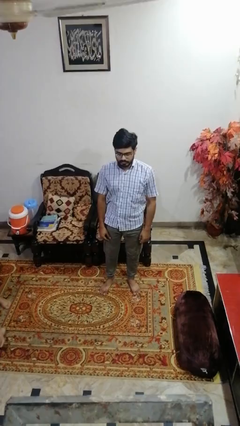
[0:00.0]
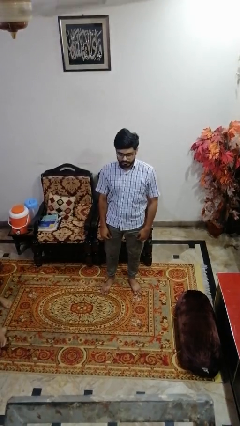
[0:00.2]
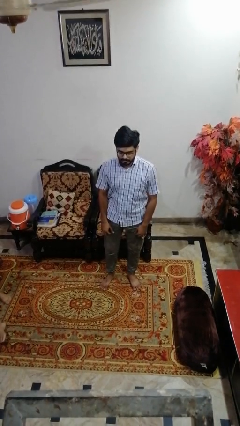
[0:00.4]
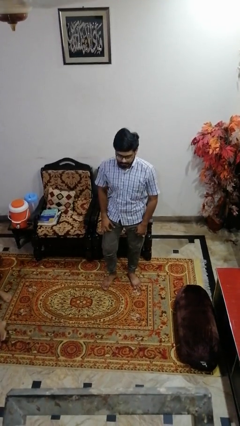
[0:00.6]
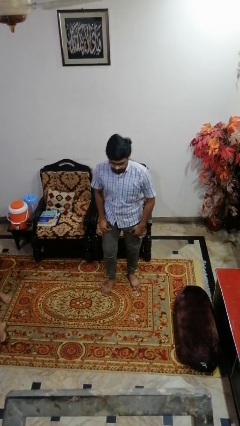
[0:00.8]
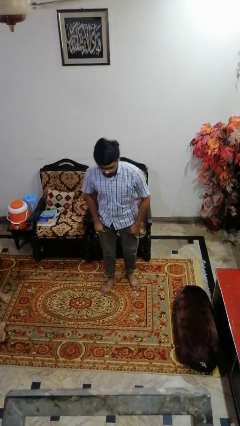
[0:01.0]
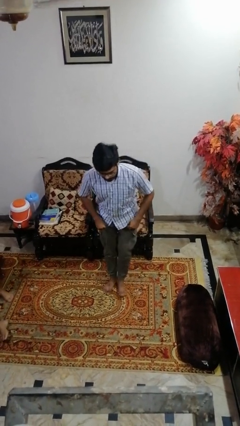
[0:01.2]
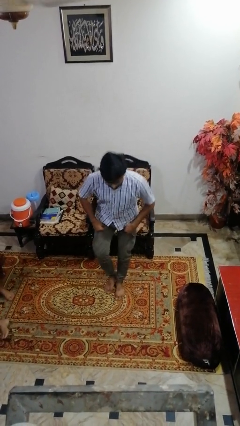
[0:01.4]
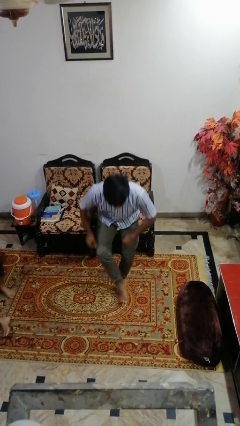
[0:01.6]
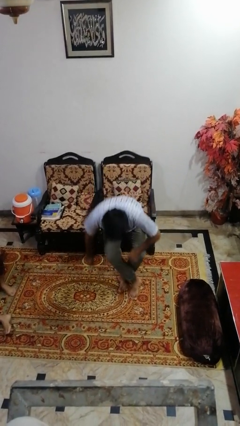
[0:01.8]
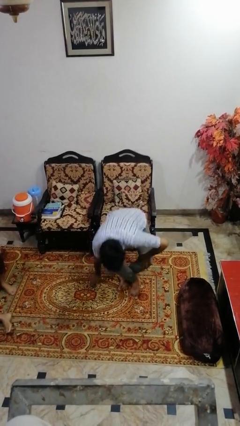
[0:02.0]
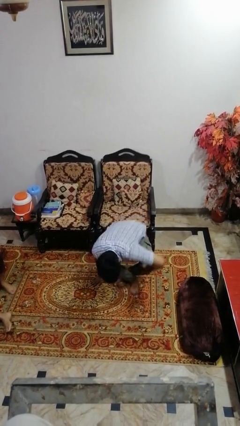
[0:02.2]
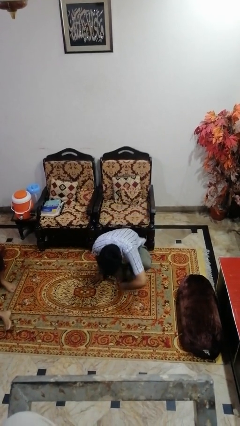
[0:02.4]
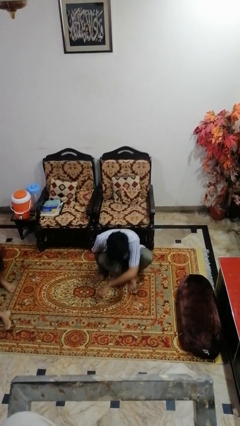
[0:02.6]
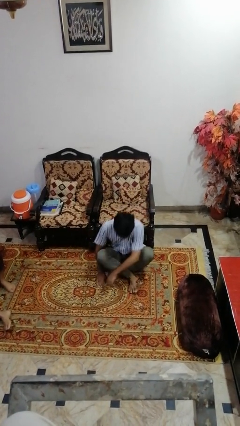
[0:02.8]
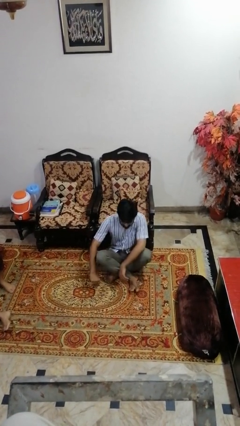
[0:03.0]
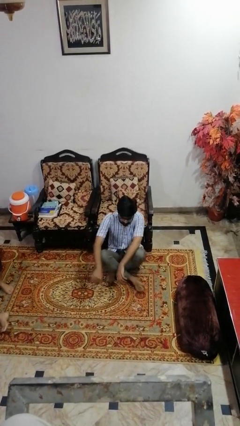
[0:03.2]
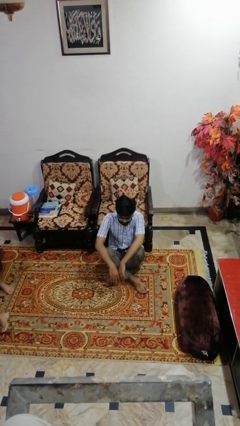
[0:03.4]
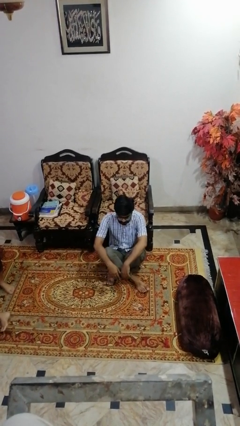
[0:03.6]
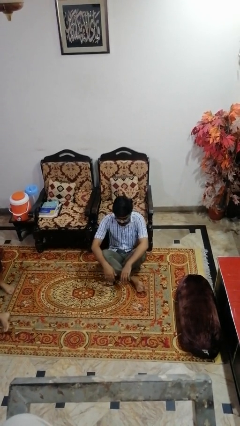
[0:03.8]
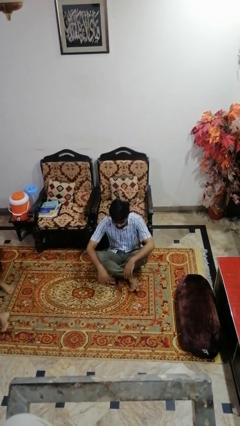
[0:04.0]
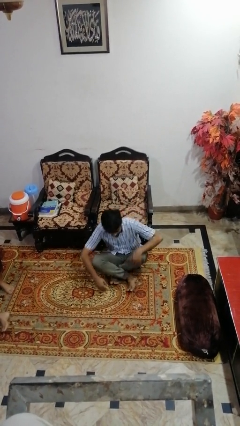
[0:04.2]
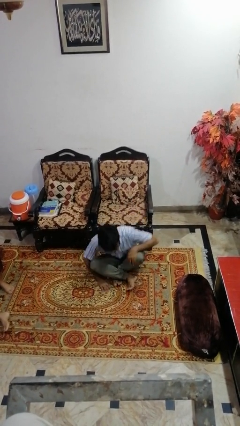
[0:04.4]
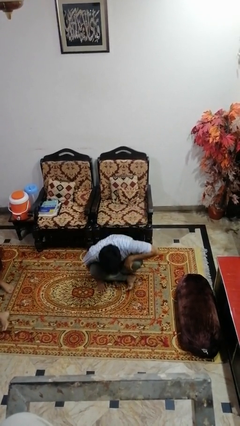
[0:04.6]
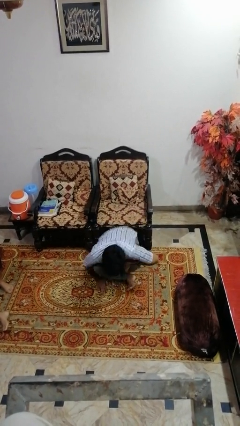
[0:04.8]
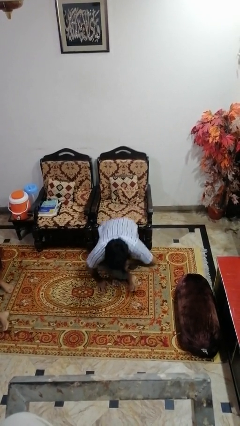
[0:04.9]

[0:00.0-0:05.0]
person sits crisscross

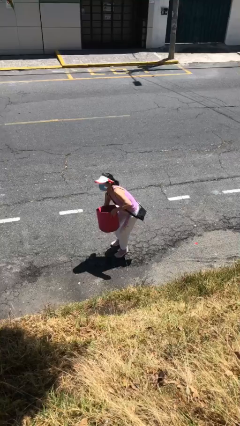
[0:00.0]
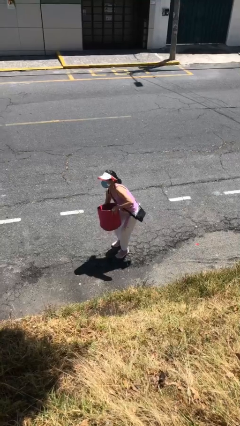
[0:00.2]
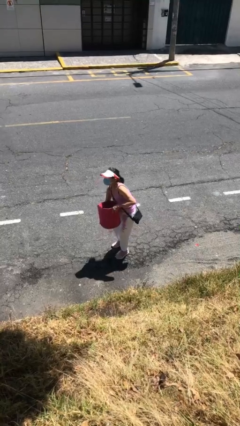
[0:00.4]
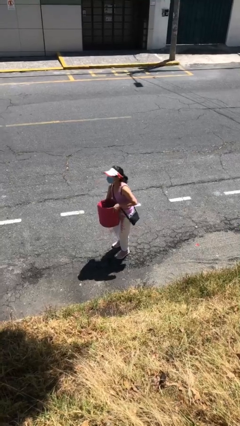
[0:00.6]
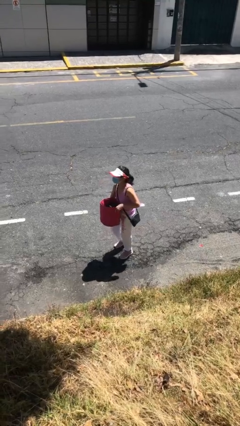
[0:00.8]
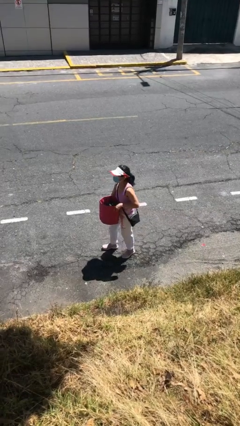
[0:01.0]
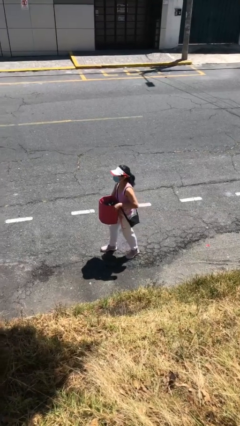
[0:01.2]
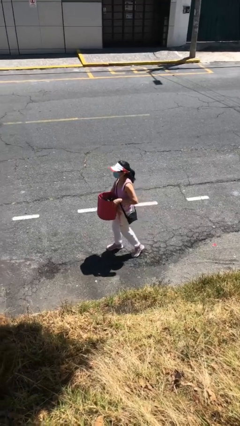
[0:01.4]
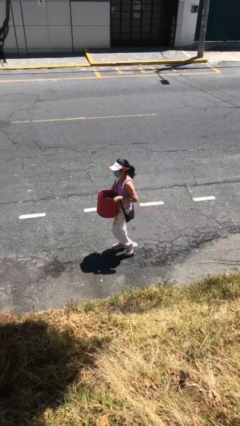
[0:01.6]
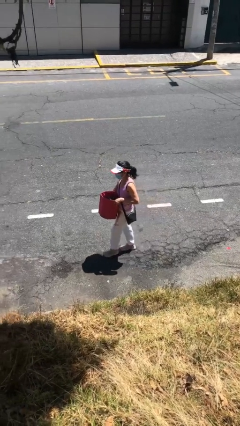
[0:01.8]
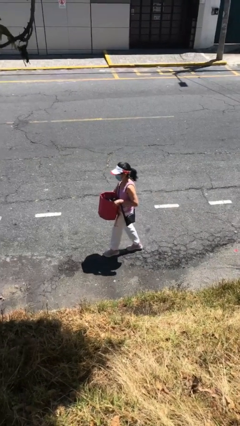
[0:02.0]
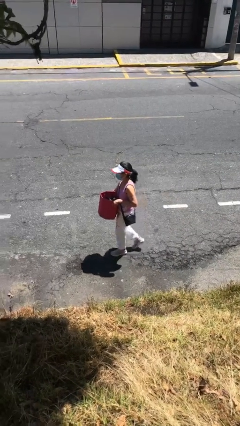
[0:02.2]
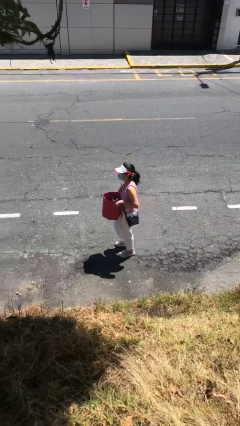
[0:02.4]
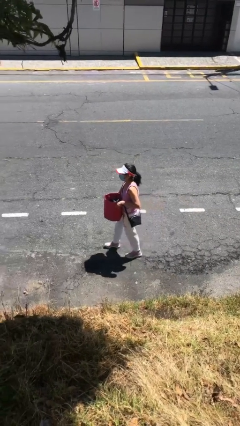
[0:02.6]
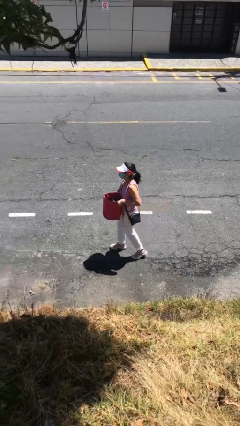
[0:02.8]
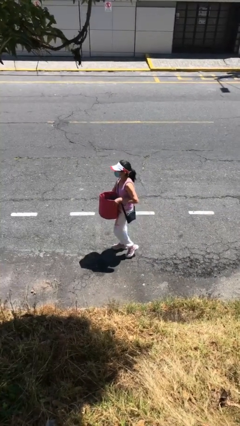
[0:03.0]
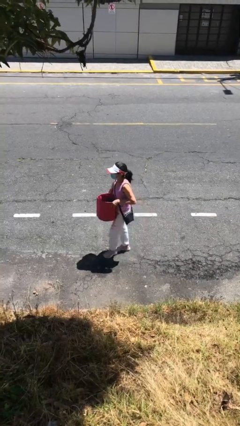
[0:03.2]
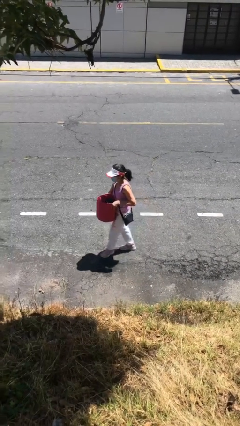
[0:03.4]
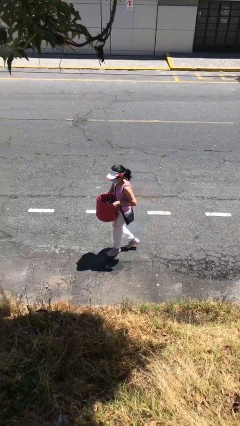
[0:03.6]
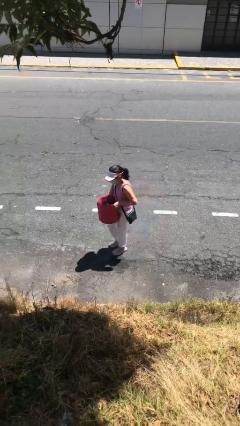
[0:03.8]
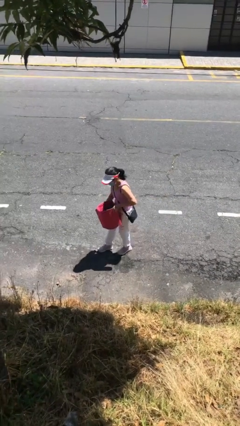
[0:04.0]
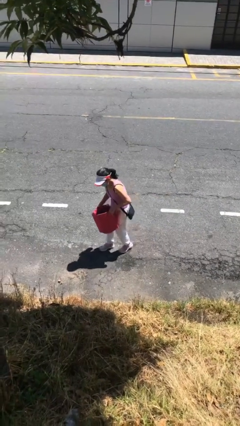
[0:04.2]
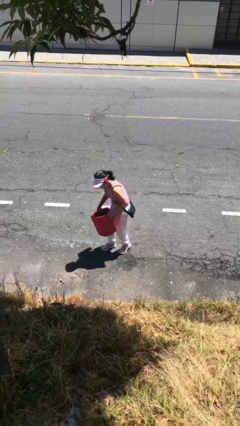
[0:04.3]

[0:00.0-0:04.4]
person carries heavy object

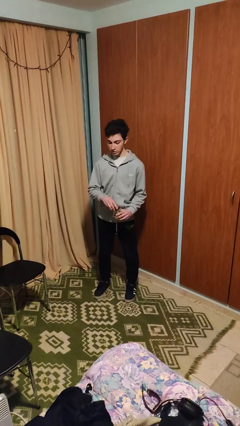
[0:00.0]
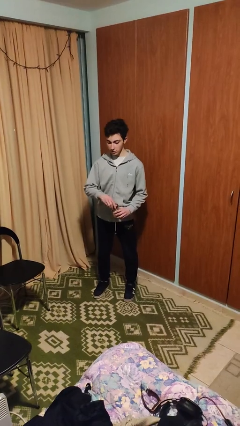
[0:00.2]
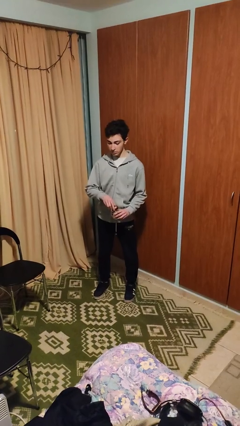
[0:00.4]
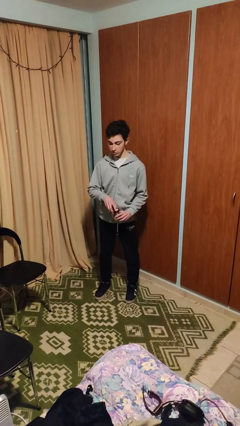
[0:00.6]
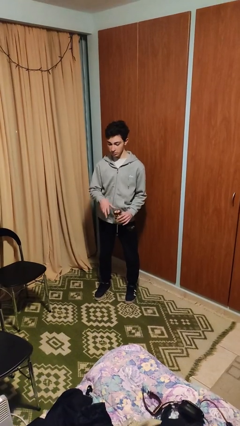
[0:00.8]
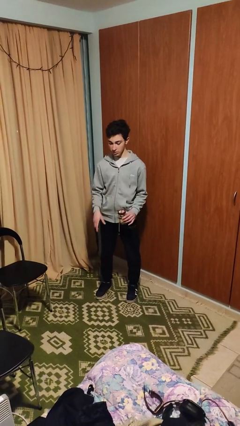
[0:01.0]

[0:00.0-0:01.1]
person closes jar

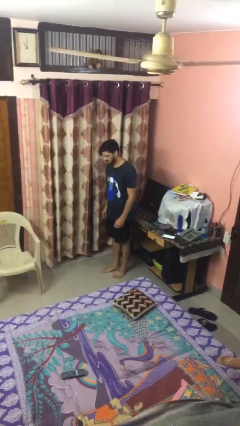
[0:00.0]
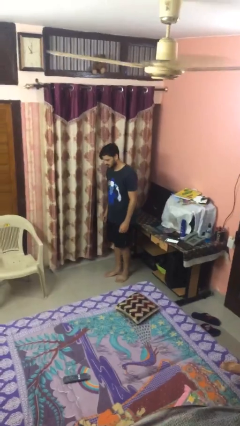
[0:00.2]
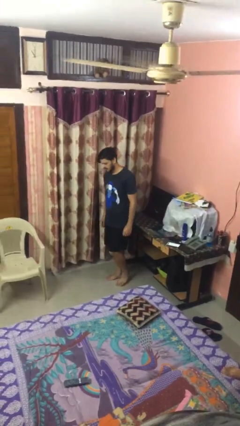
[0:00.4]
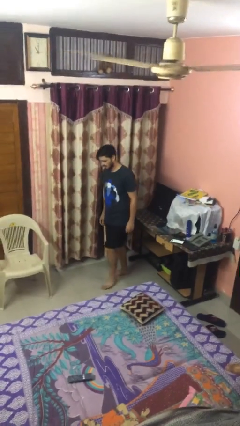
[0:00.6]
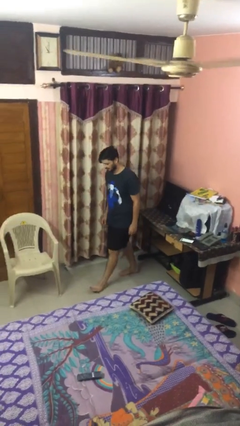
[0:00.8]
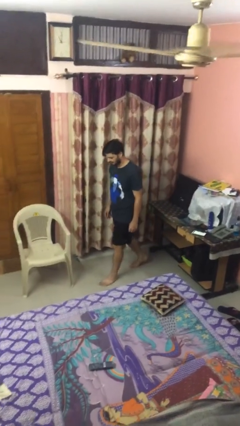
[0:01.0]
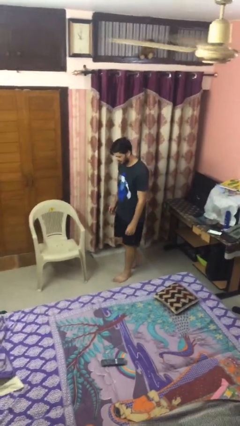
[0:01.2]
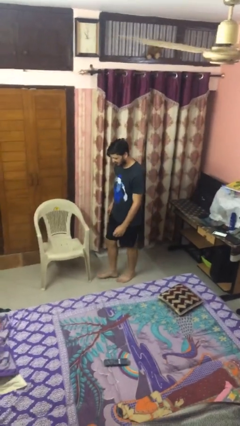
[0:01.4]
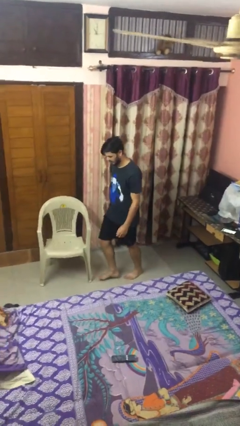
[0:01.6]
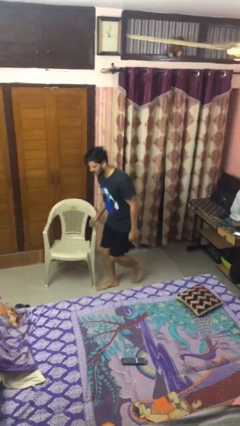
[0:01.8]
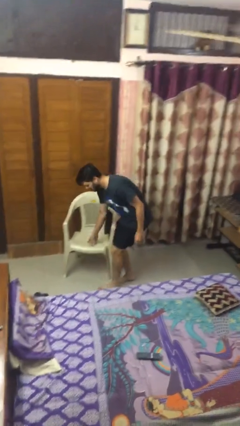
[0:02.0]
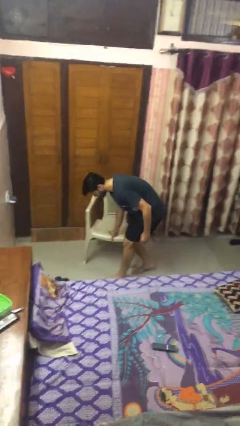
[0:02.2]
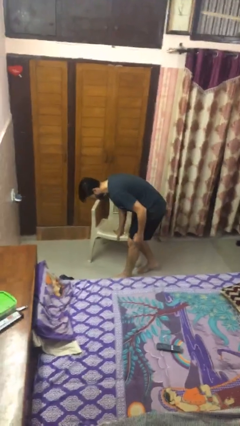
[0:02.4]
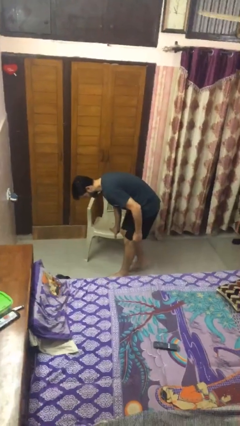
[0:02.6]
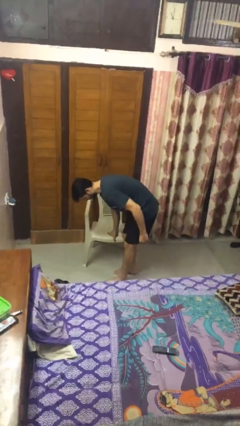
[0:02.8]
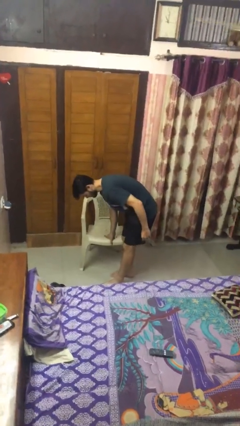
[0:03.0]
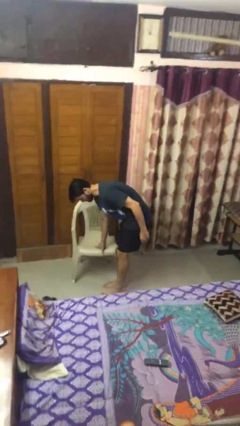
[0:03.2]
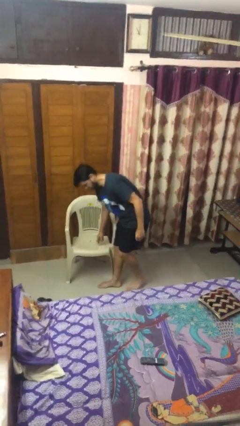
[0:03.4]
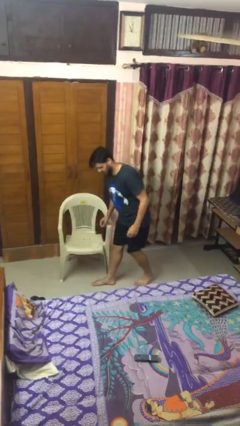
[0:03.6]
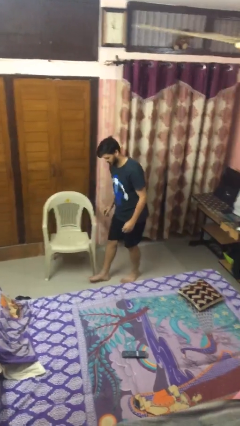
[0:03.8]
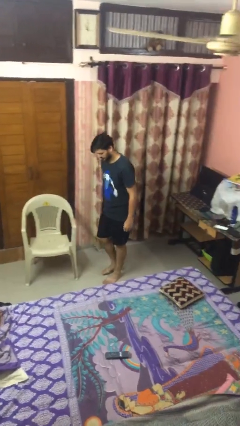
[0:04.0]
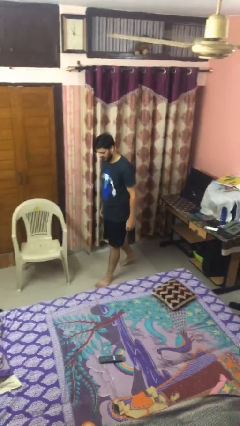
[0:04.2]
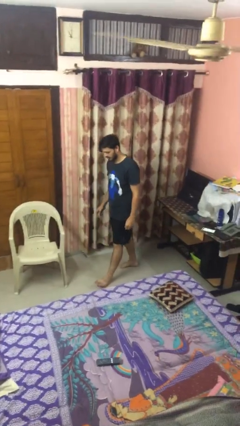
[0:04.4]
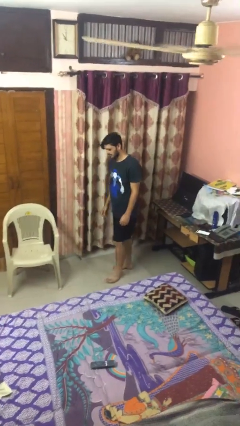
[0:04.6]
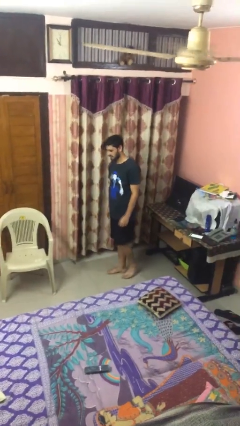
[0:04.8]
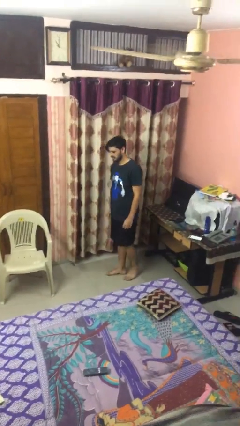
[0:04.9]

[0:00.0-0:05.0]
person stubs toe

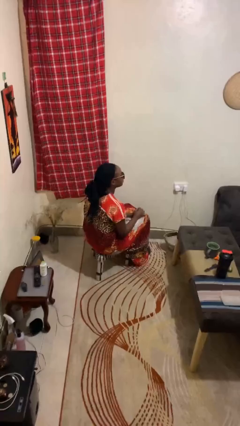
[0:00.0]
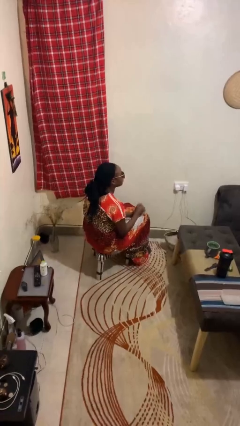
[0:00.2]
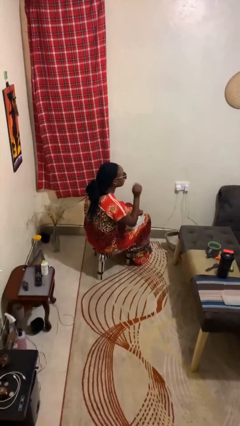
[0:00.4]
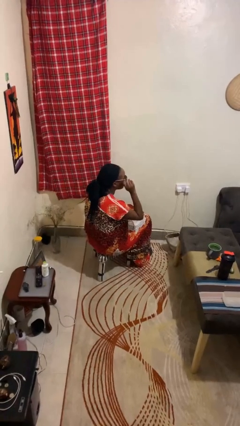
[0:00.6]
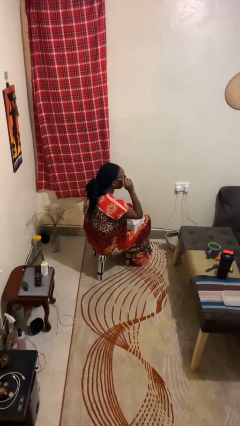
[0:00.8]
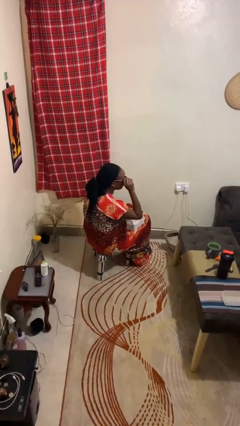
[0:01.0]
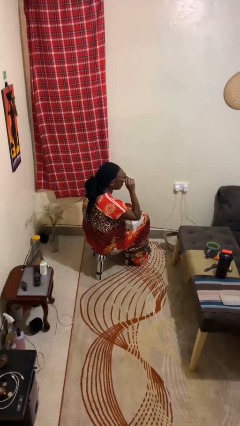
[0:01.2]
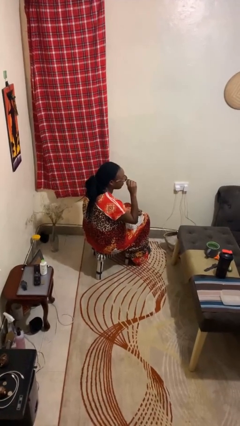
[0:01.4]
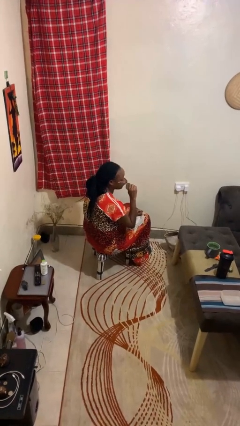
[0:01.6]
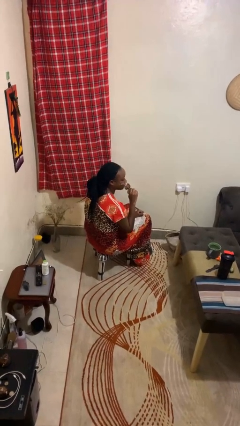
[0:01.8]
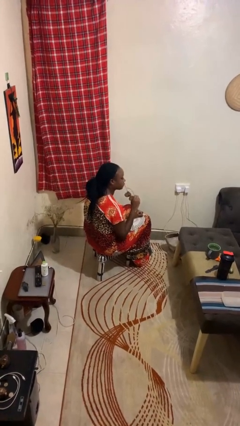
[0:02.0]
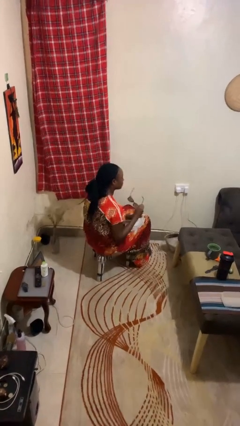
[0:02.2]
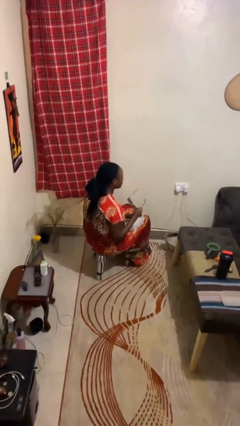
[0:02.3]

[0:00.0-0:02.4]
person takes off sunglasses

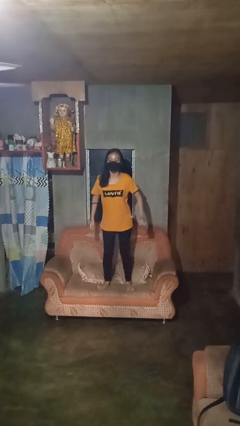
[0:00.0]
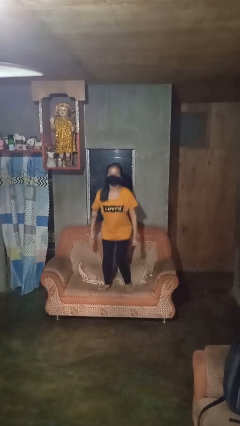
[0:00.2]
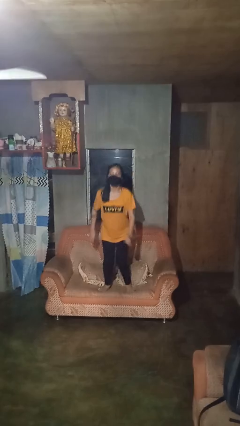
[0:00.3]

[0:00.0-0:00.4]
person jumps on couch
